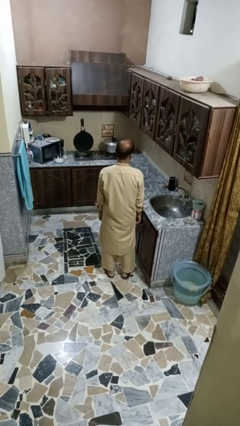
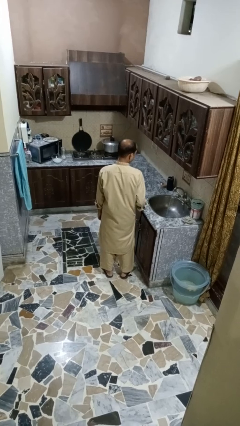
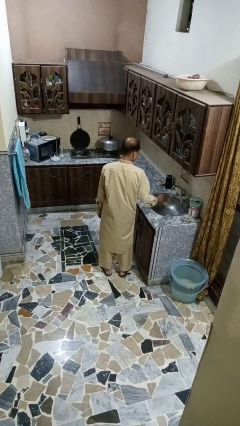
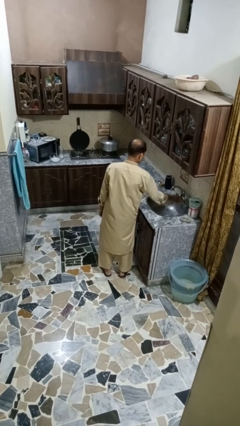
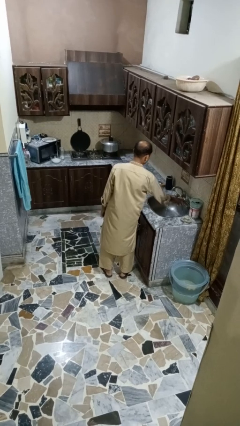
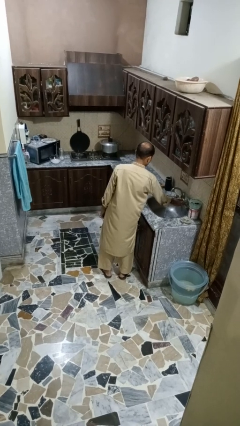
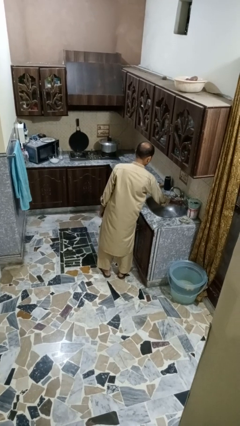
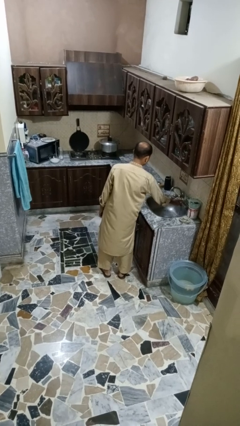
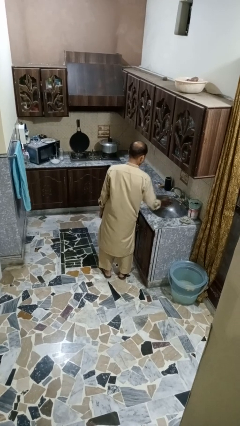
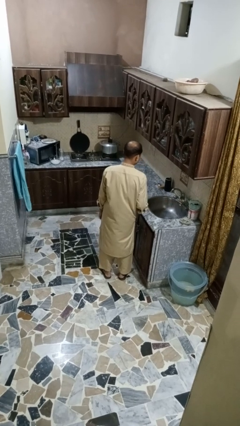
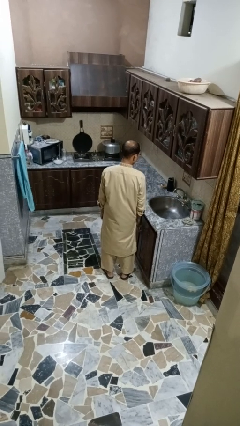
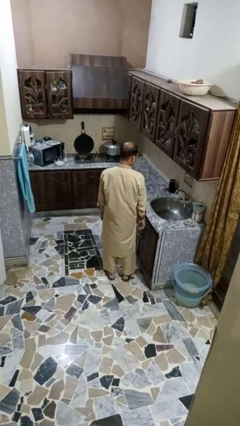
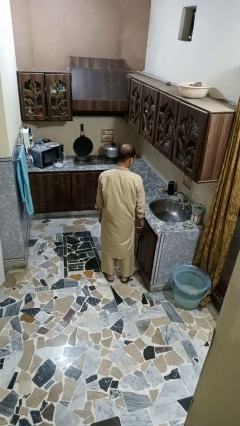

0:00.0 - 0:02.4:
person turns off faucet

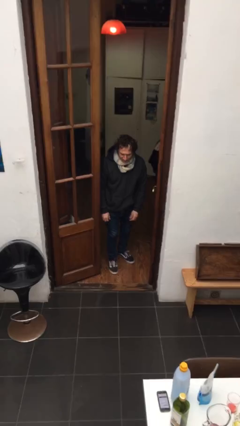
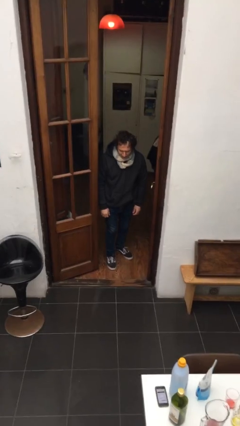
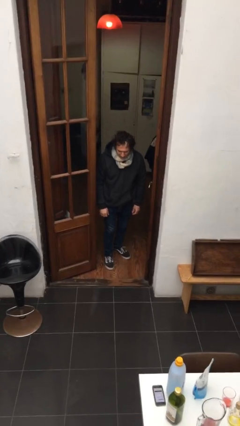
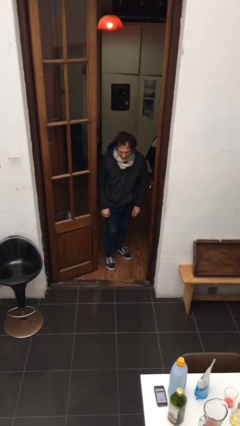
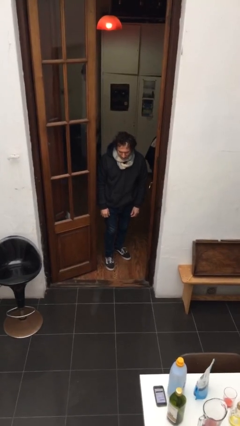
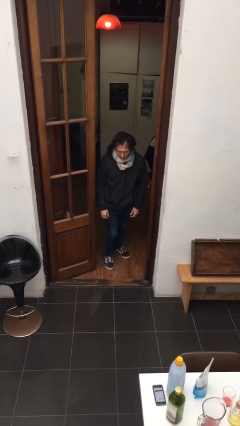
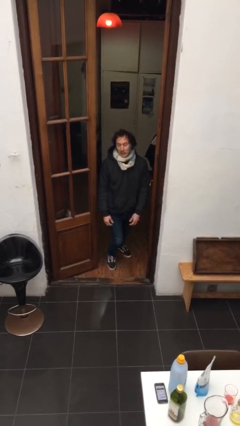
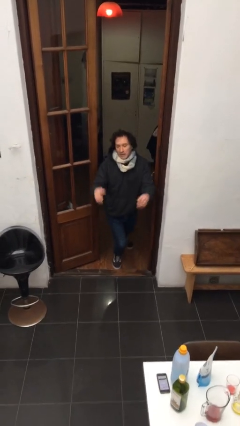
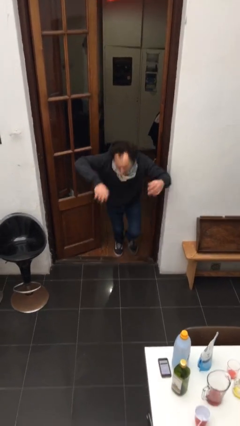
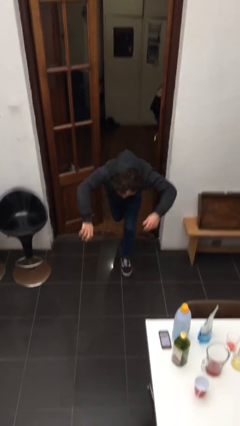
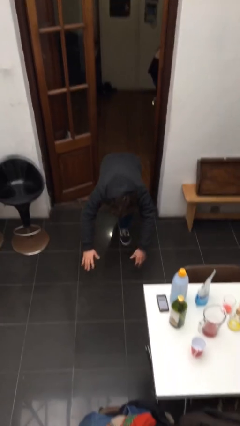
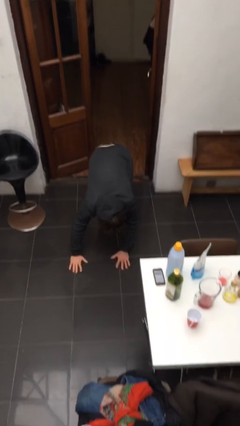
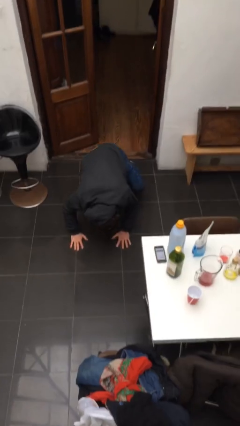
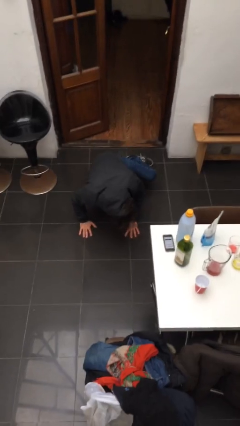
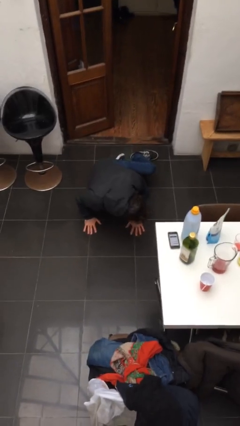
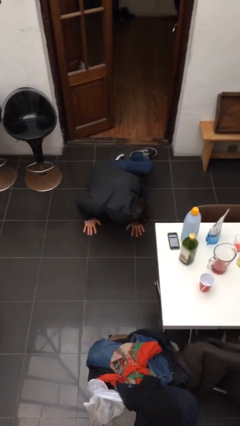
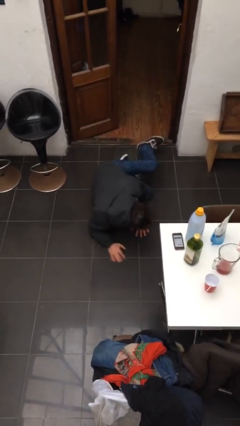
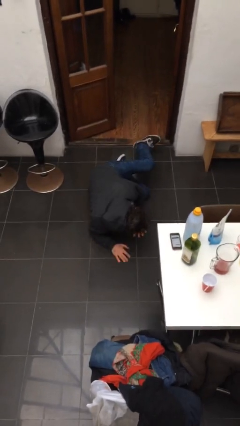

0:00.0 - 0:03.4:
person trips on object on floor

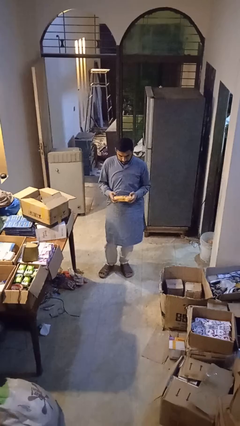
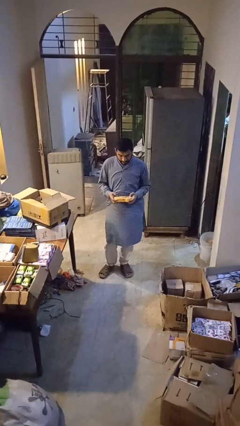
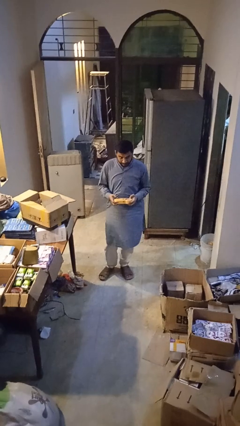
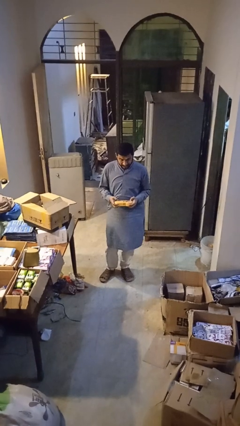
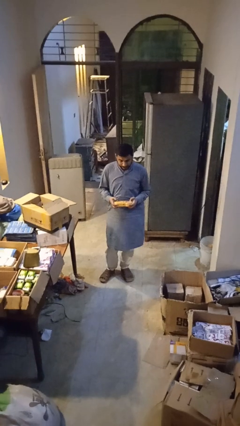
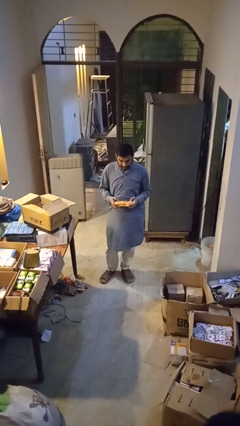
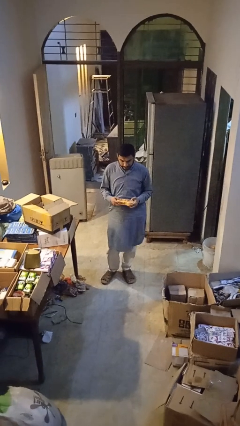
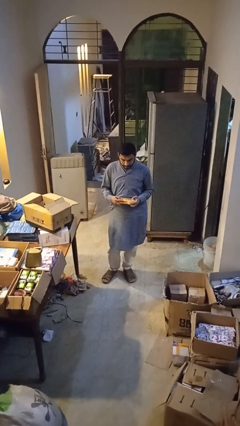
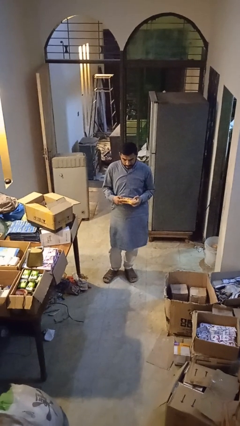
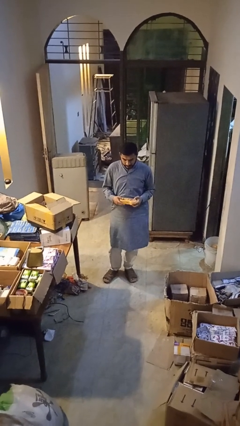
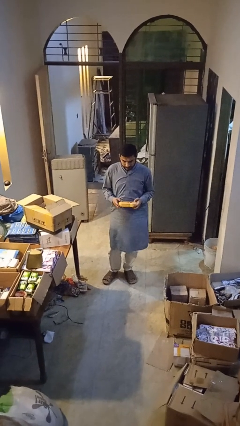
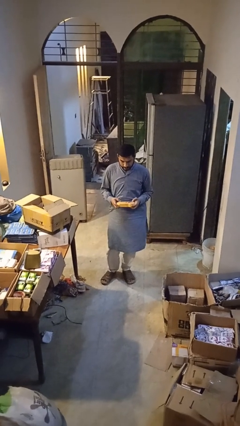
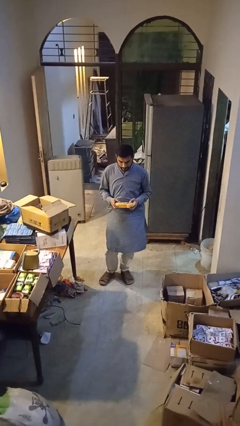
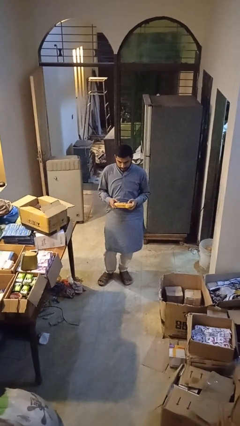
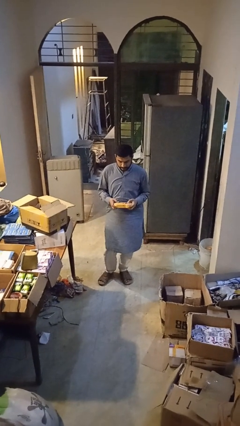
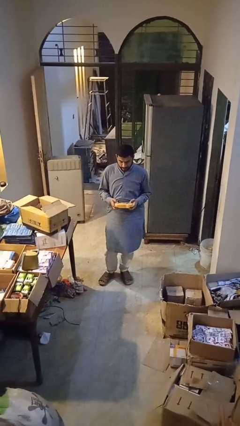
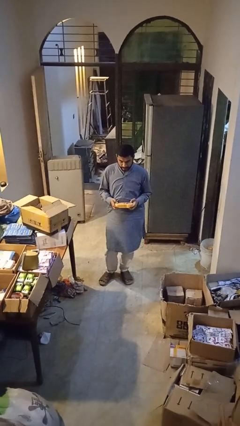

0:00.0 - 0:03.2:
person interacts with handheld game

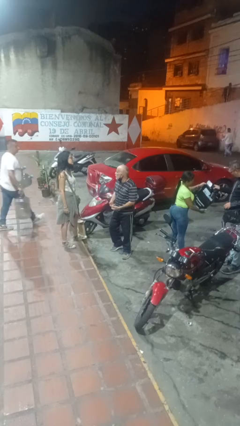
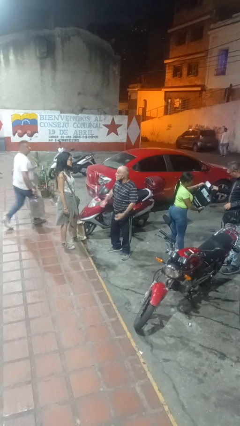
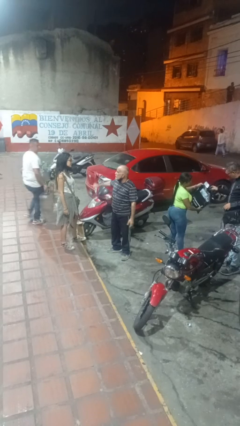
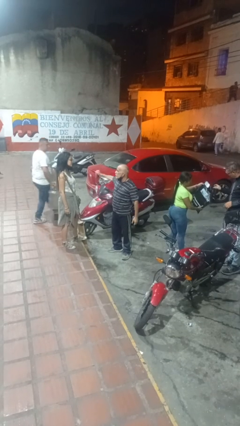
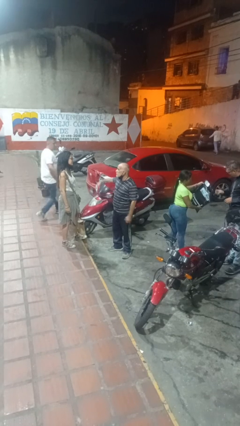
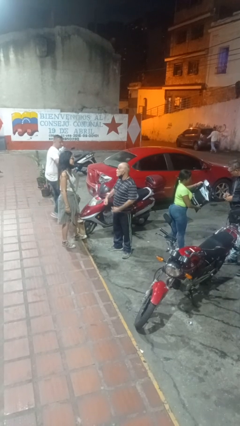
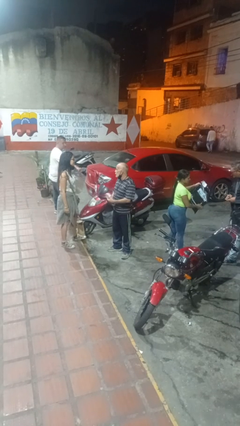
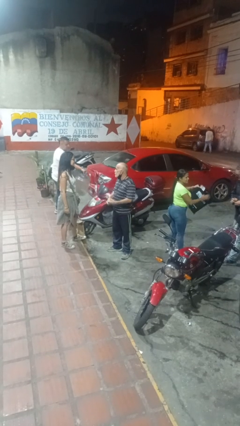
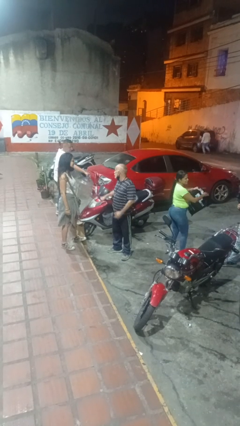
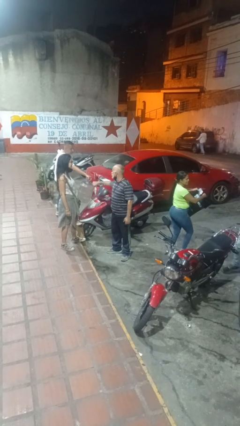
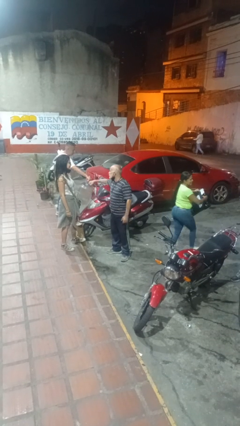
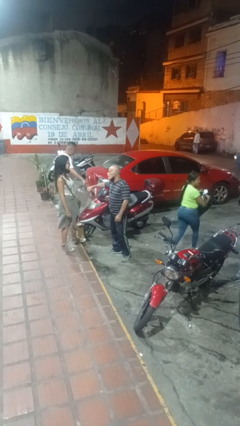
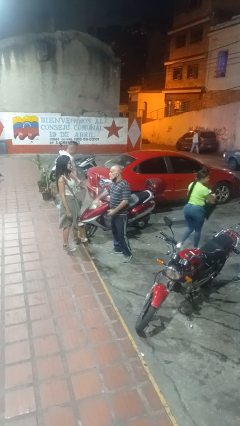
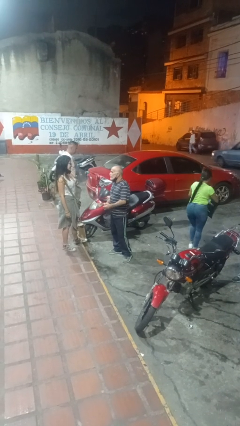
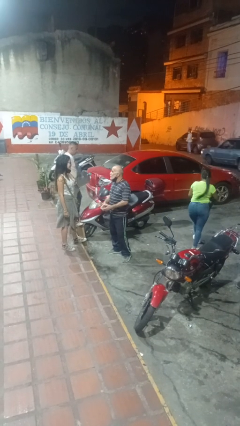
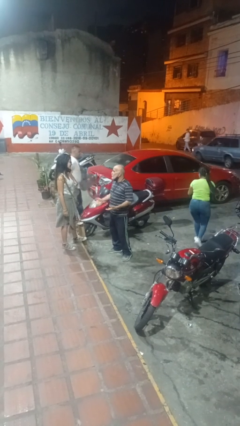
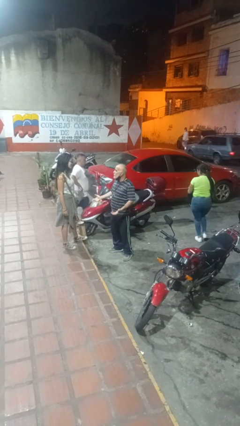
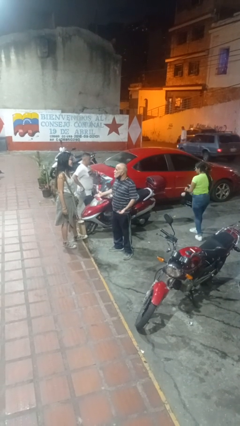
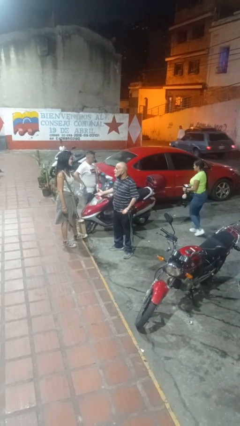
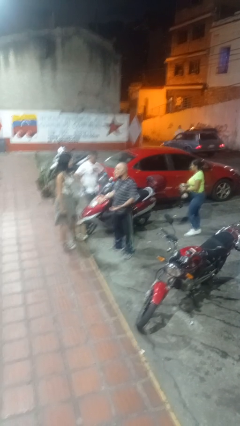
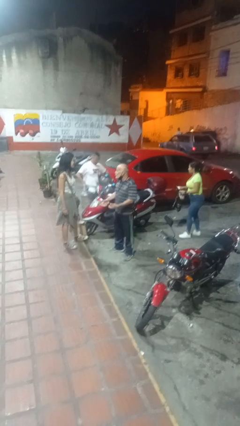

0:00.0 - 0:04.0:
person talks to person

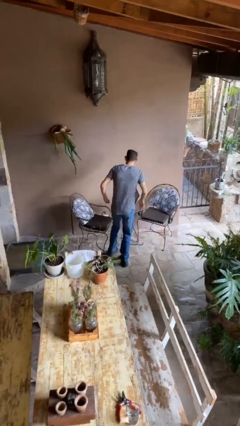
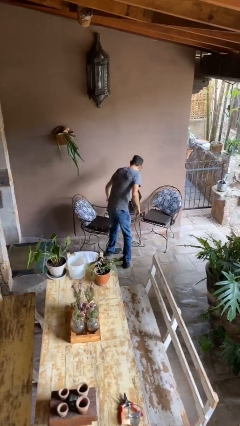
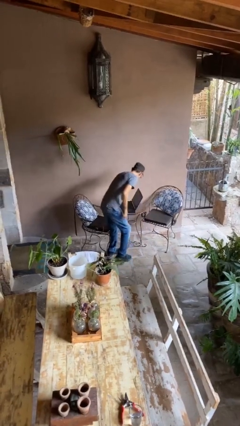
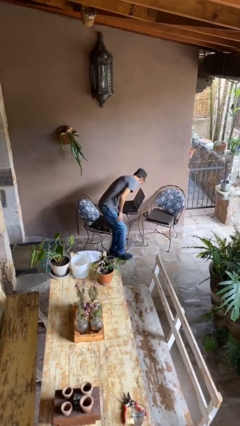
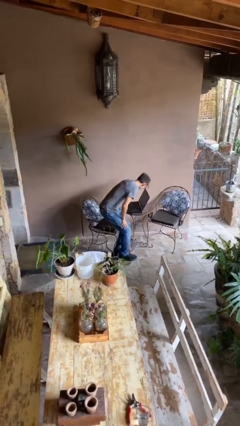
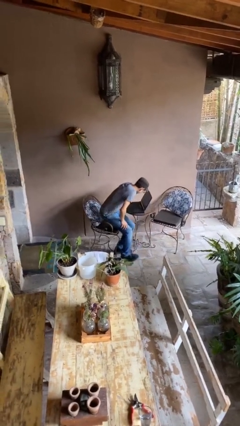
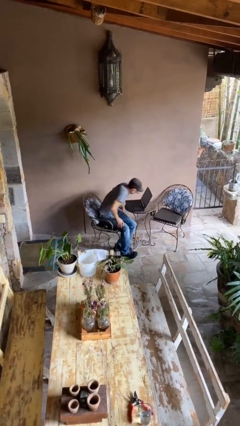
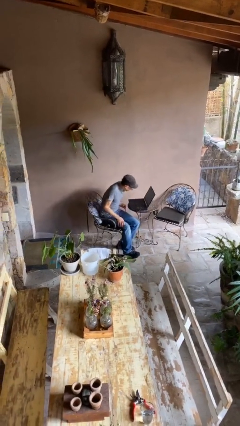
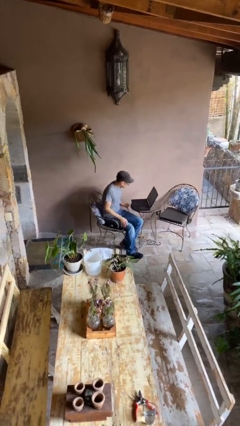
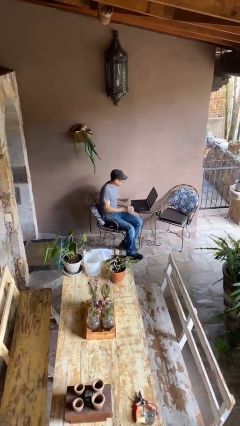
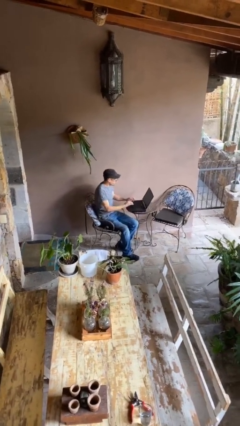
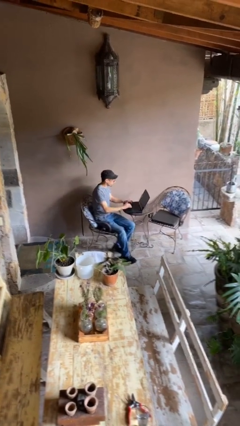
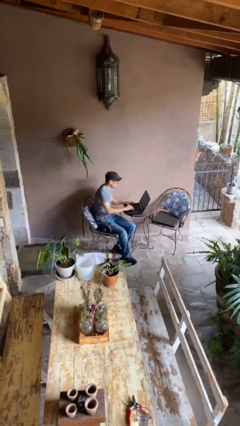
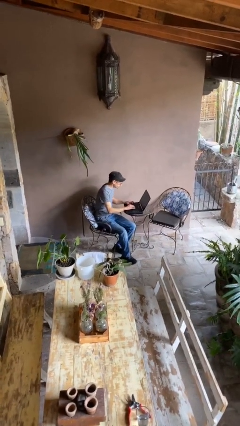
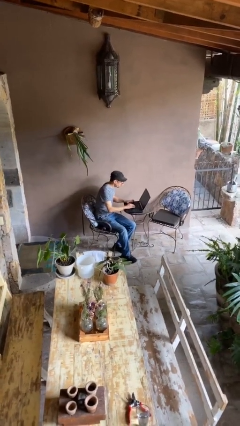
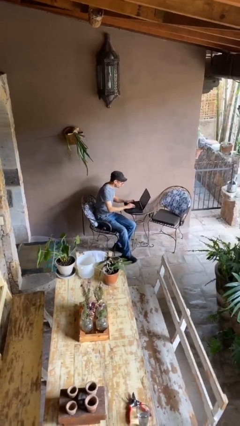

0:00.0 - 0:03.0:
person sits down

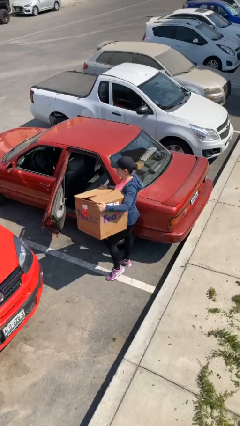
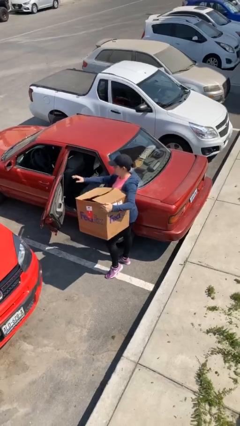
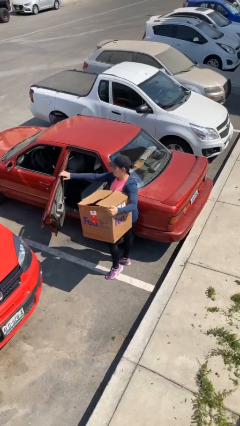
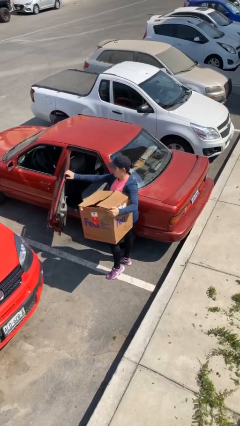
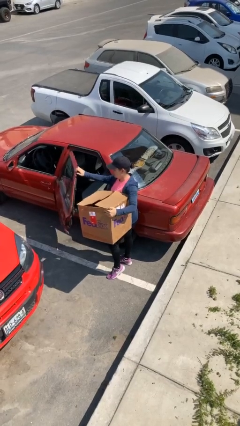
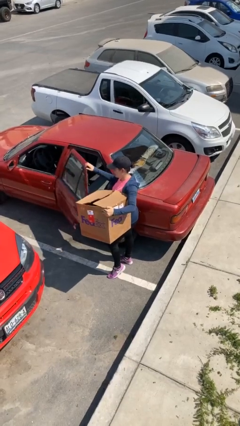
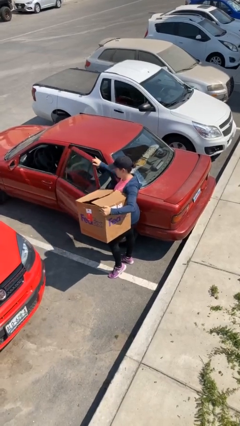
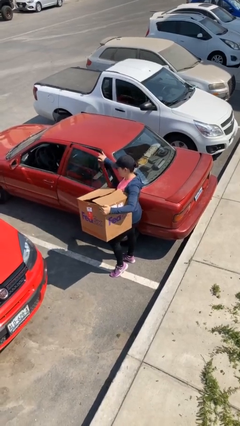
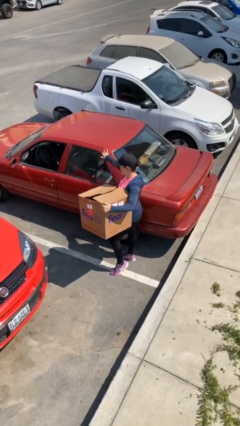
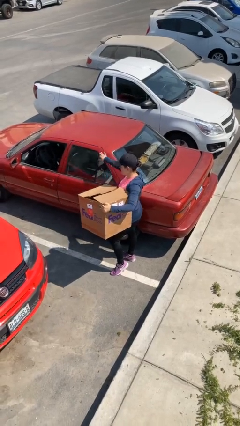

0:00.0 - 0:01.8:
person closes car door
